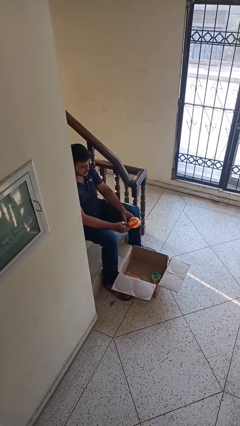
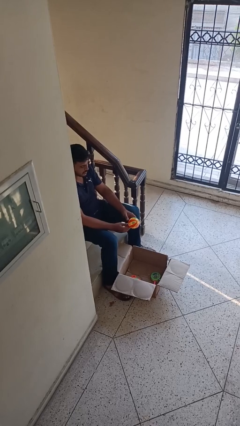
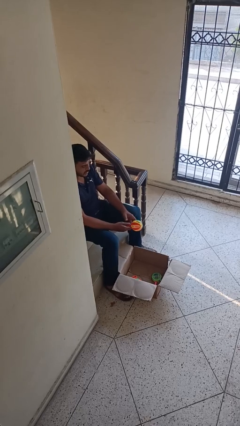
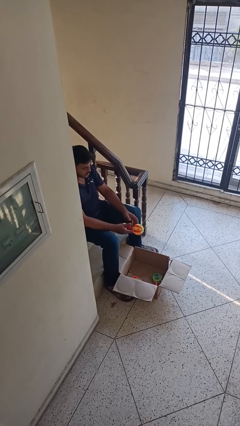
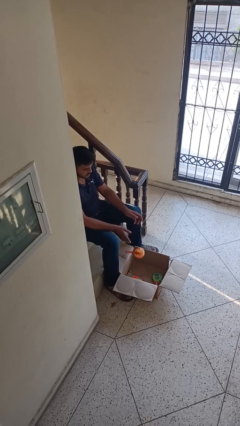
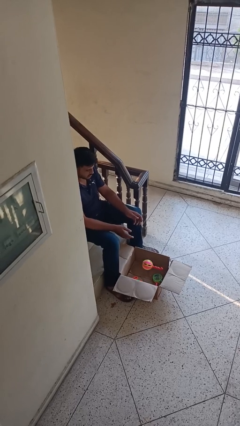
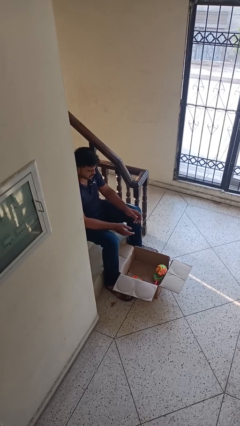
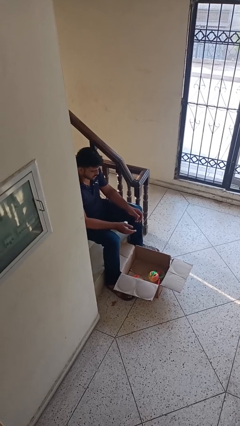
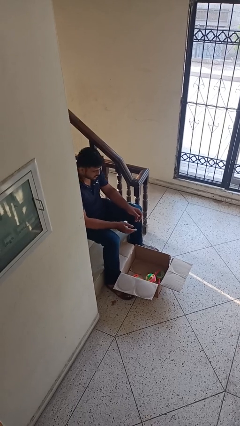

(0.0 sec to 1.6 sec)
person puts object into box

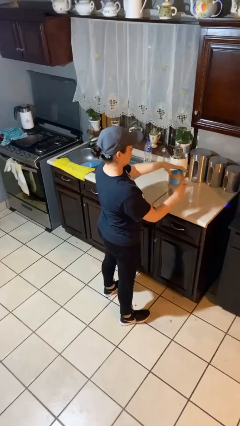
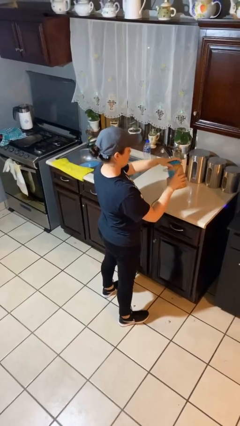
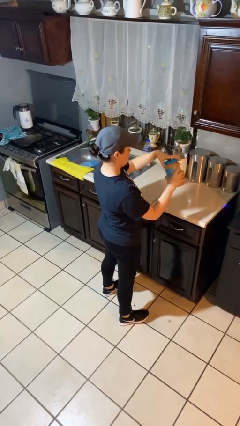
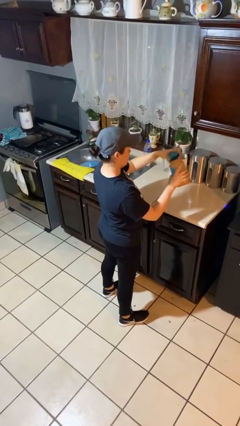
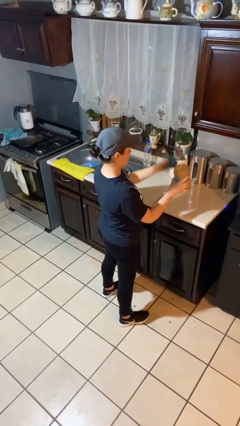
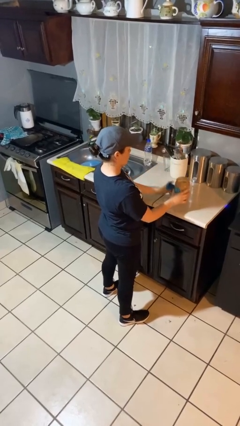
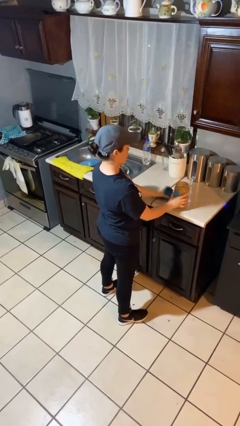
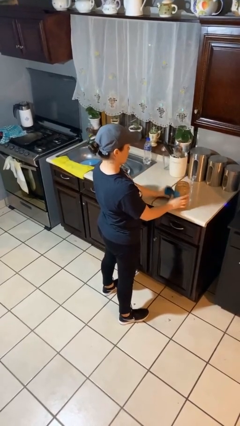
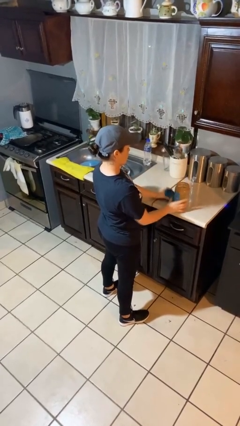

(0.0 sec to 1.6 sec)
person opens jar

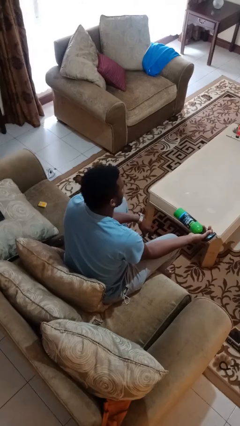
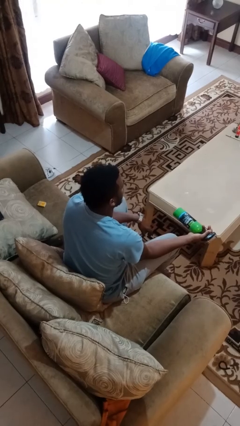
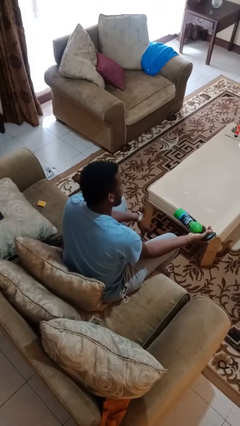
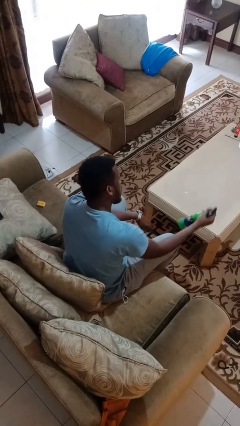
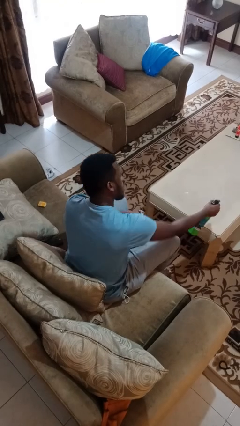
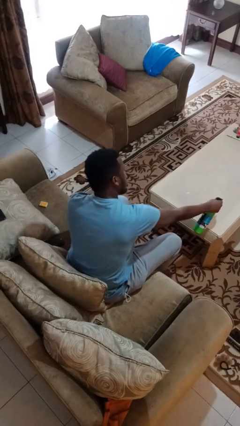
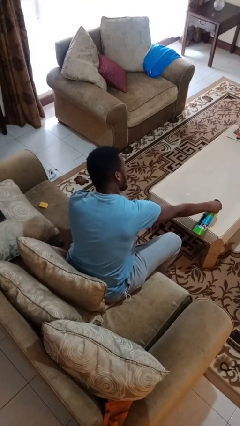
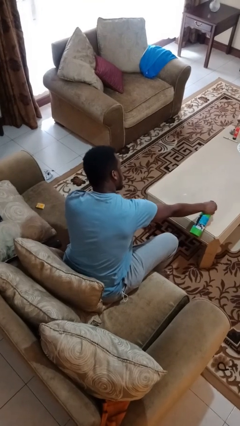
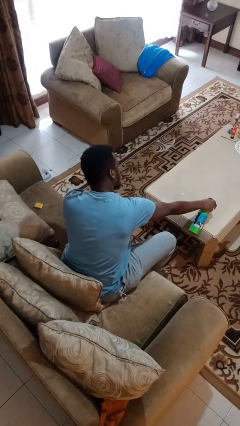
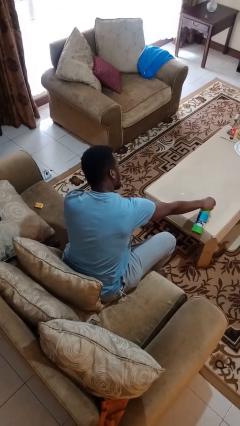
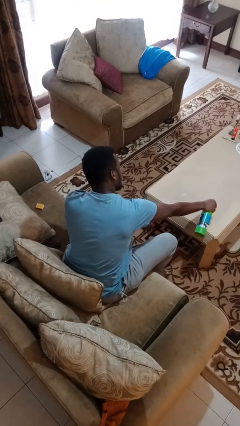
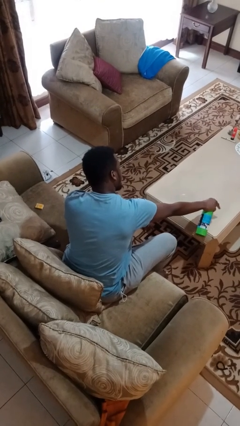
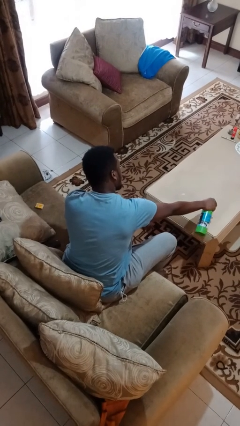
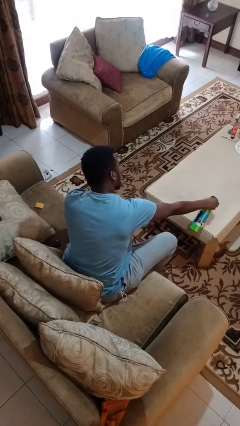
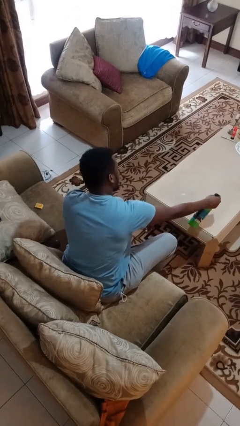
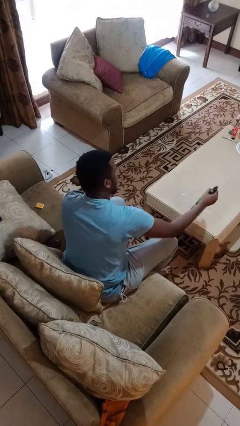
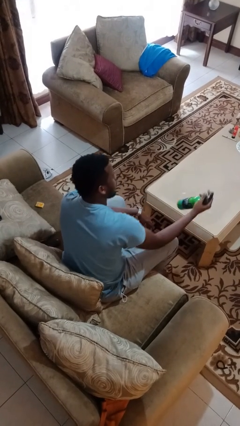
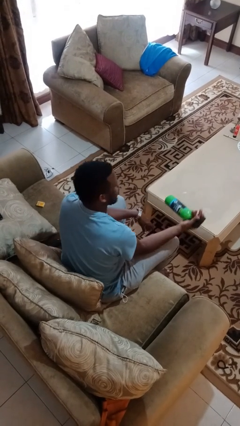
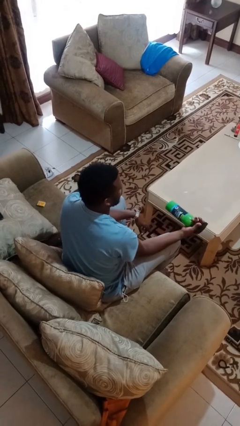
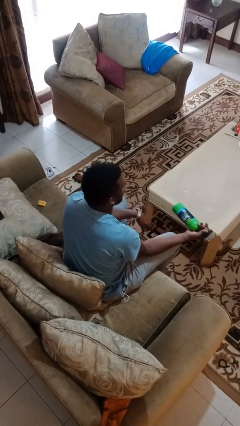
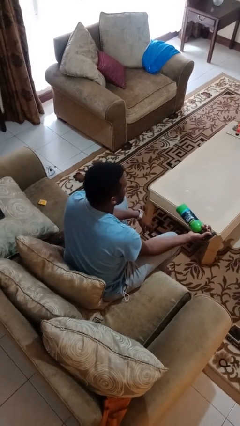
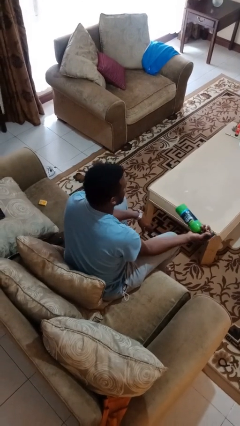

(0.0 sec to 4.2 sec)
person sprays from bottle

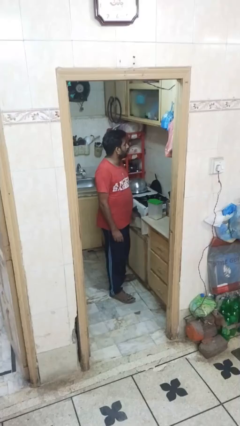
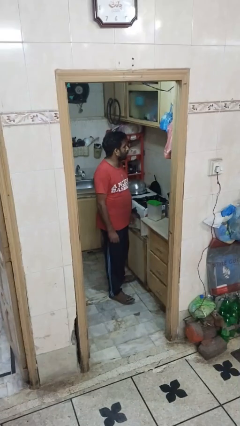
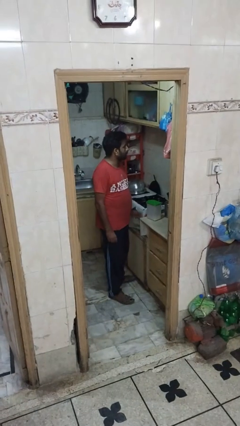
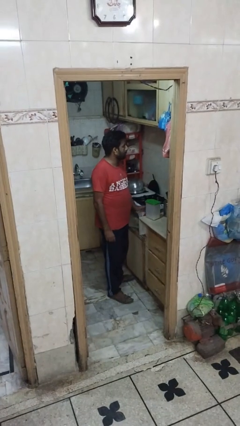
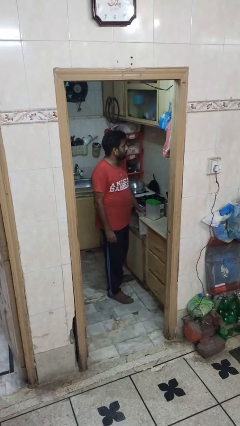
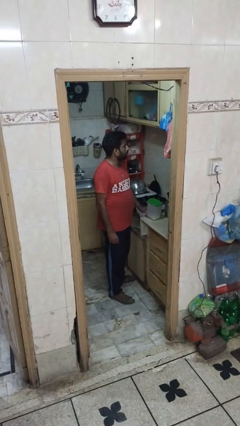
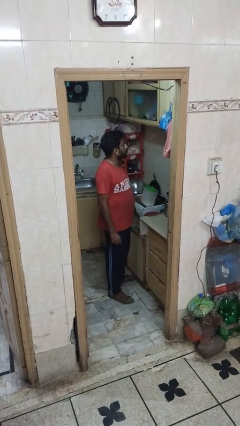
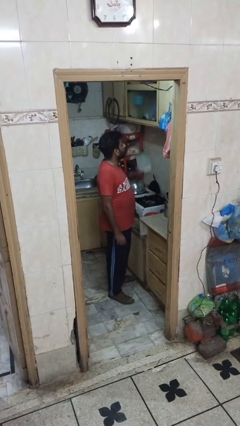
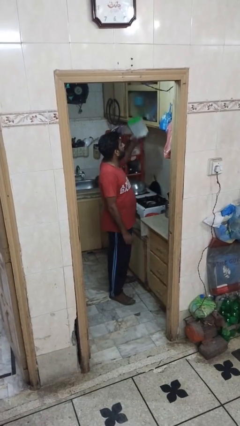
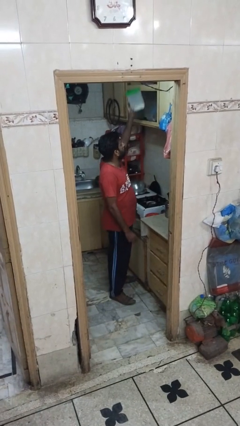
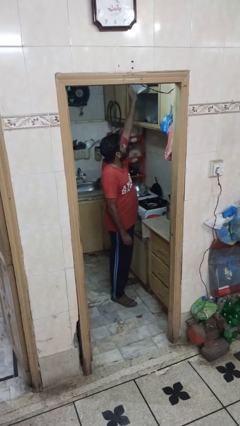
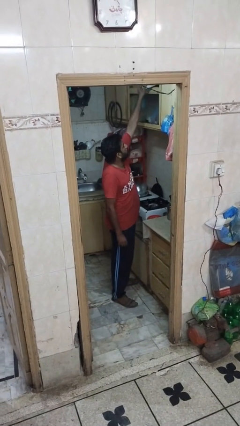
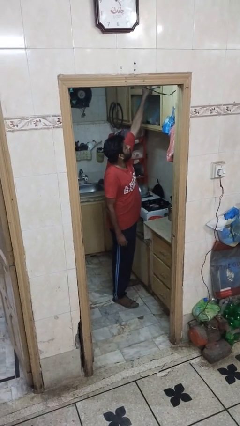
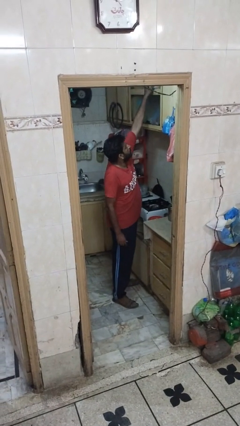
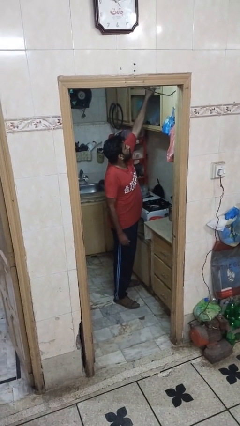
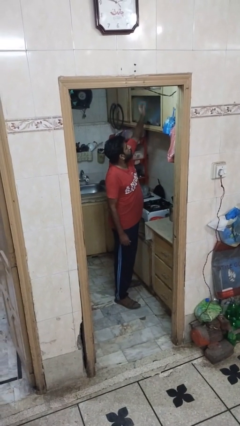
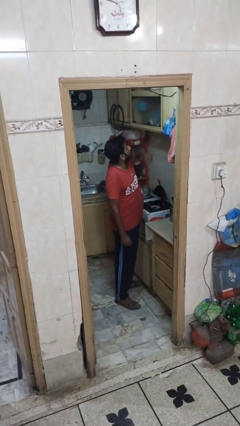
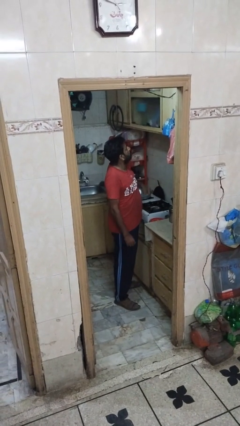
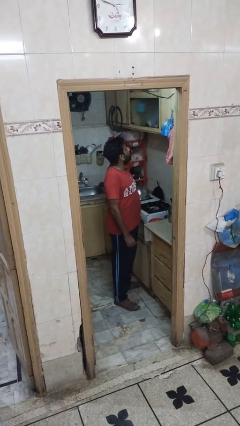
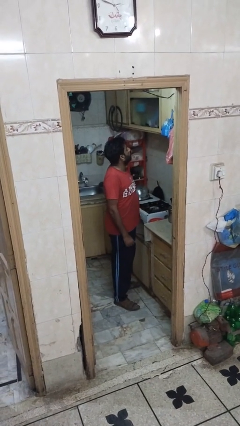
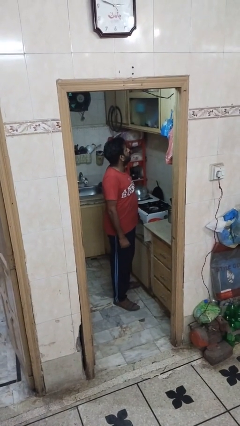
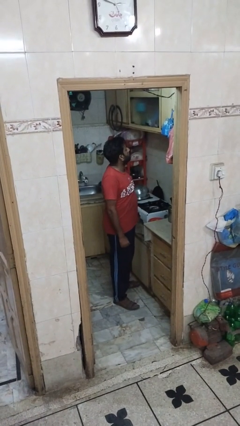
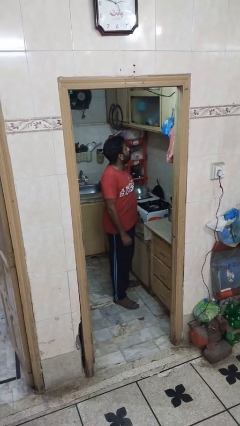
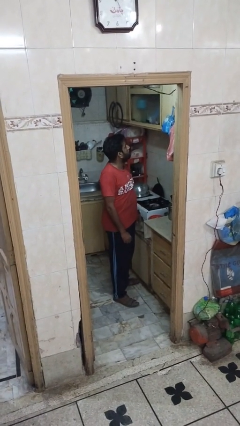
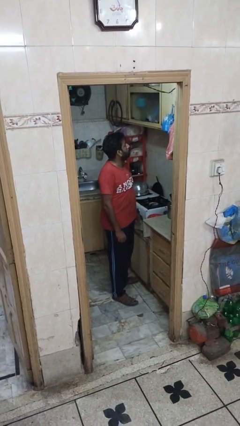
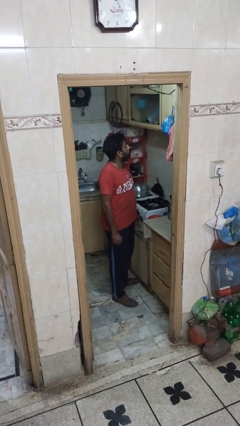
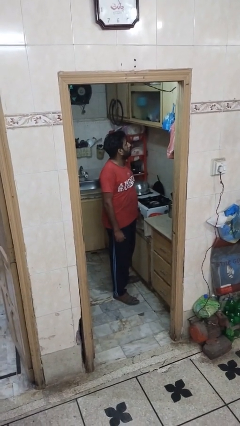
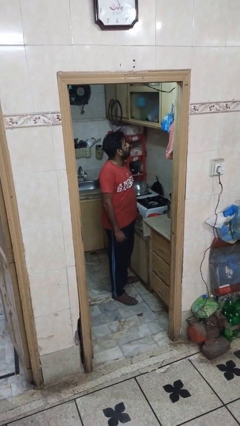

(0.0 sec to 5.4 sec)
person picks up object from shelf

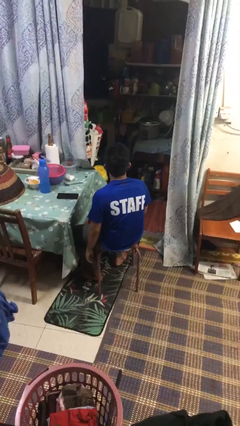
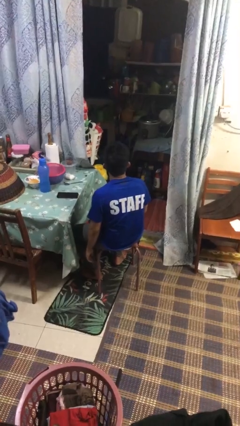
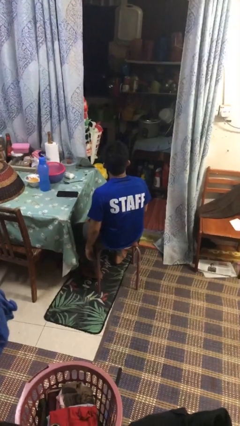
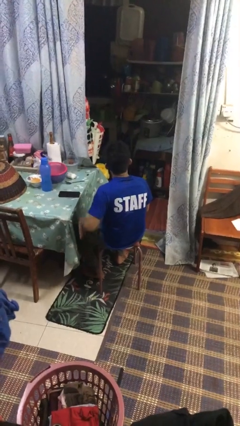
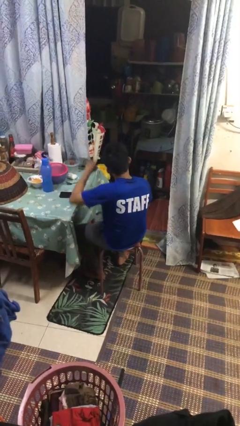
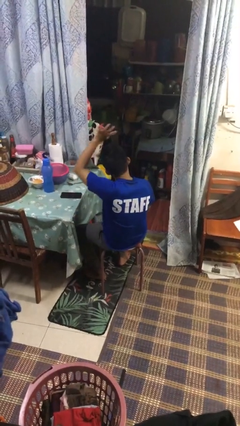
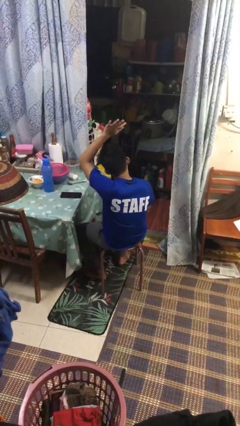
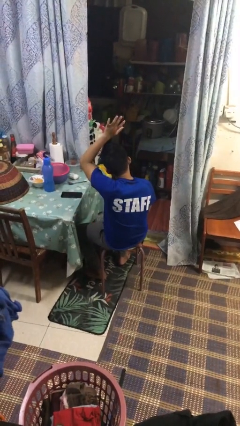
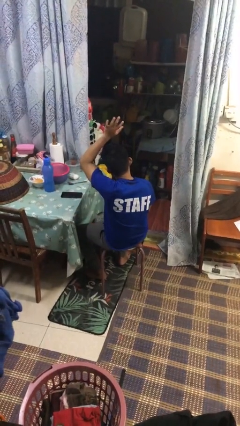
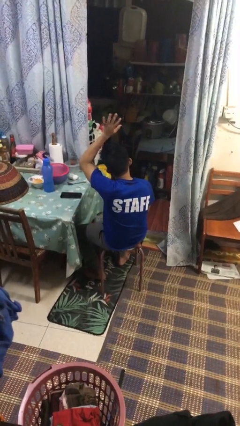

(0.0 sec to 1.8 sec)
person gestures raise hand

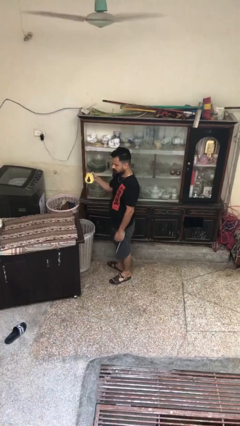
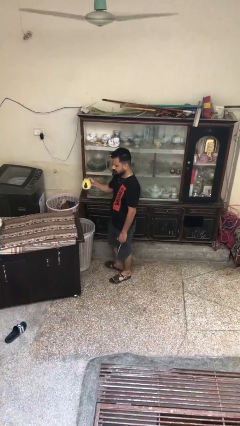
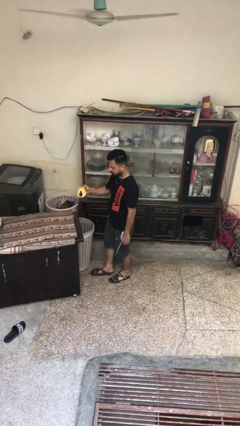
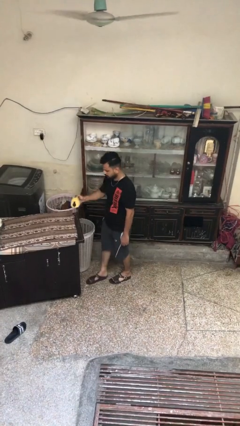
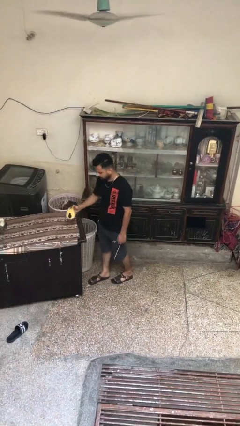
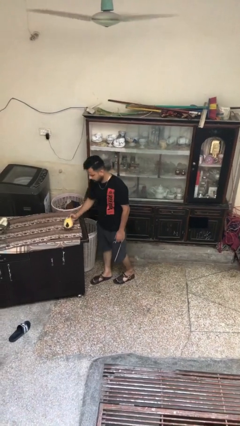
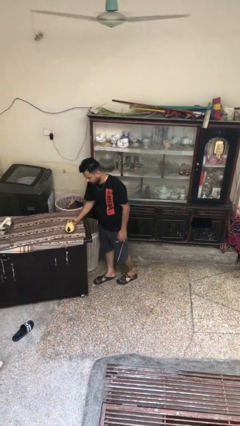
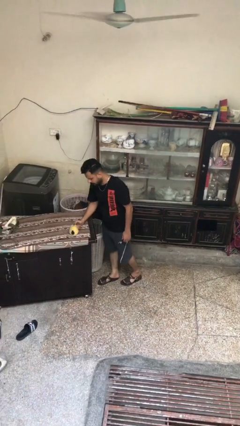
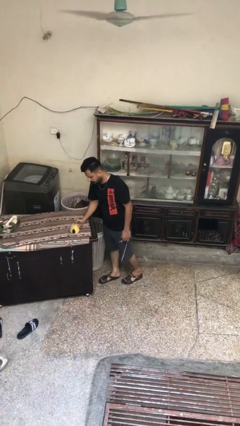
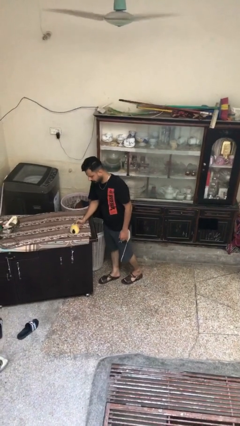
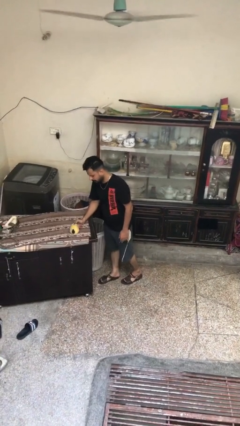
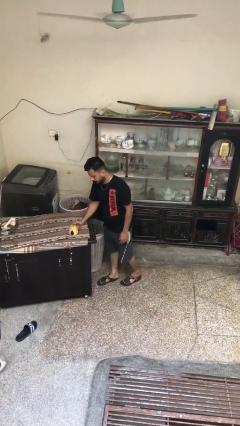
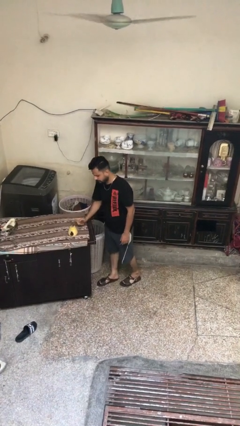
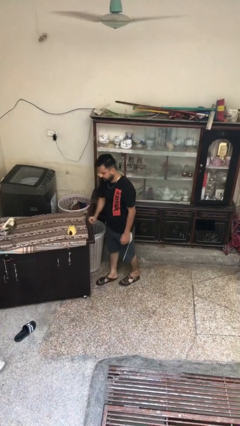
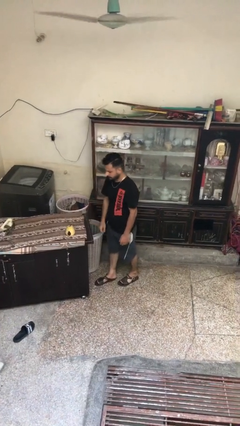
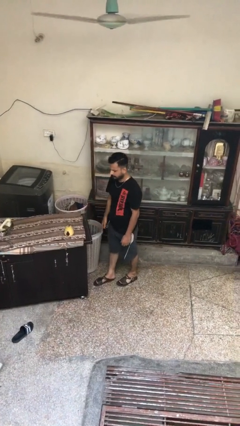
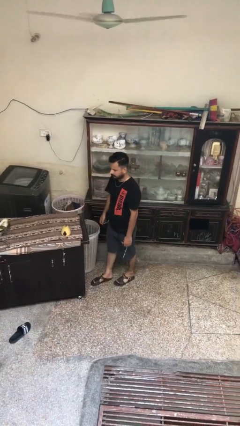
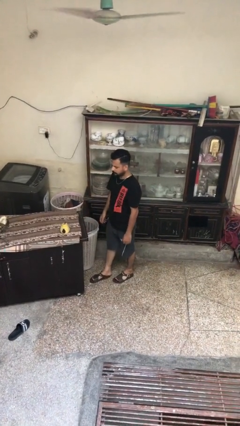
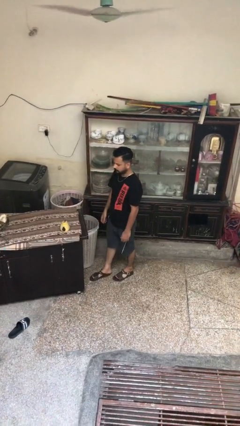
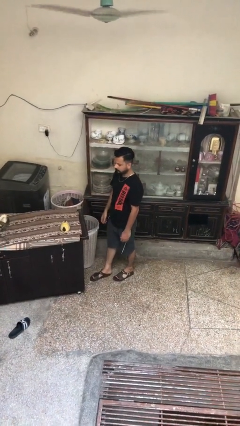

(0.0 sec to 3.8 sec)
person puts down object on table
